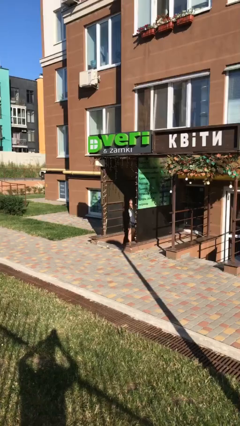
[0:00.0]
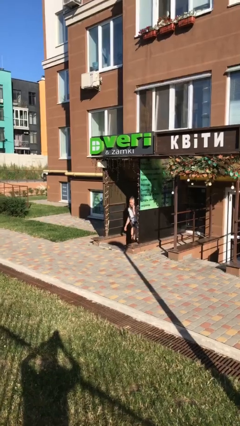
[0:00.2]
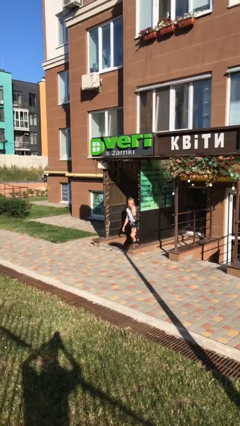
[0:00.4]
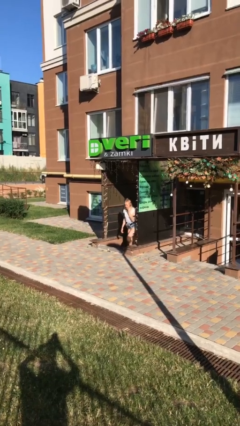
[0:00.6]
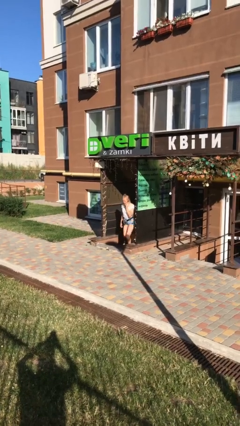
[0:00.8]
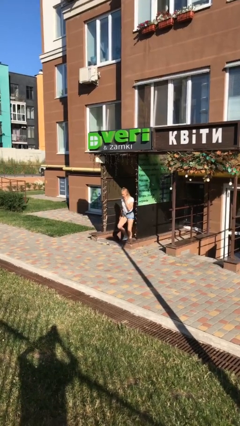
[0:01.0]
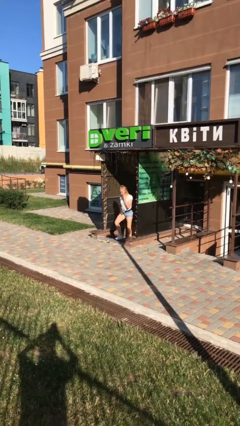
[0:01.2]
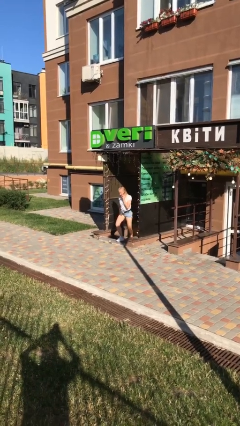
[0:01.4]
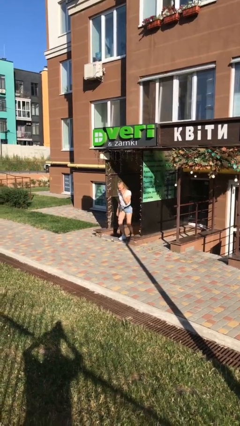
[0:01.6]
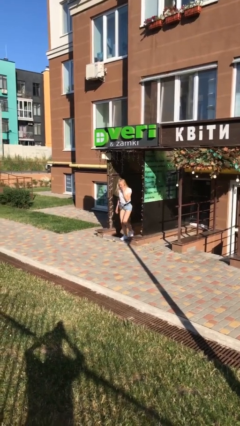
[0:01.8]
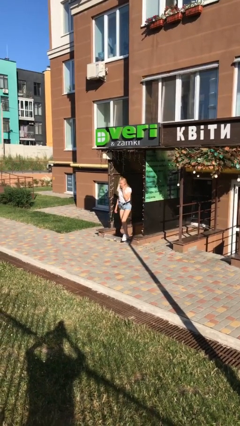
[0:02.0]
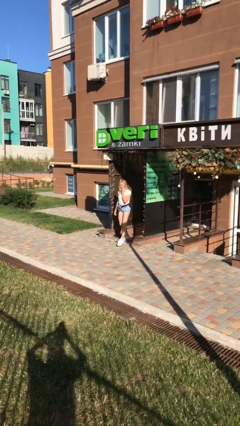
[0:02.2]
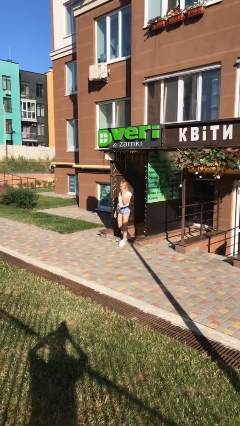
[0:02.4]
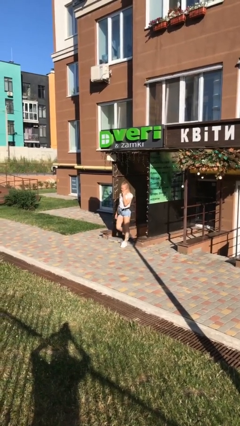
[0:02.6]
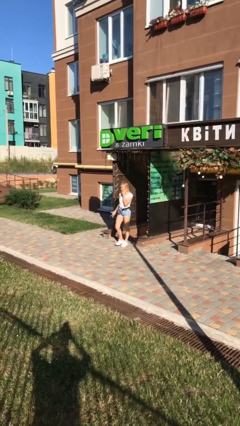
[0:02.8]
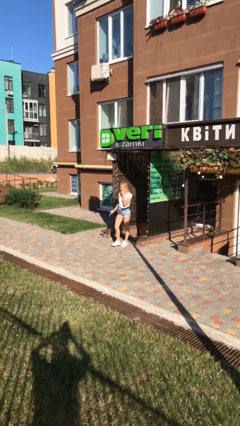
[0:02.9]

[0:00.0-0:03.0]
person enters scene through structure

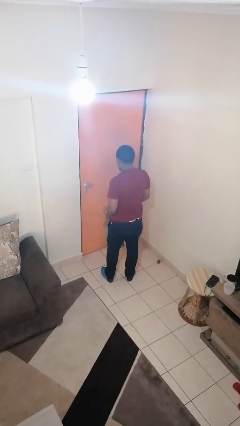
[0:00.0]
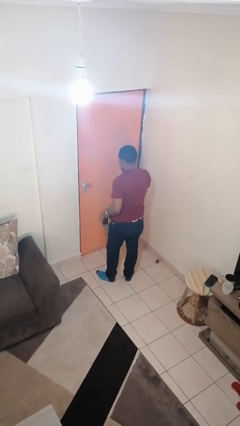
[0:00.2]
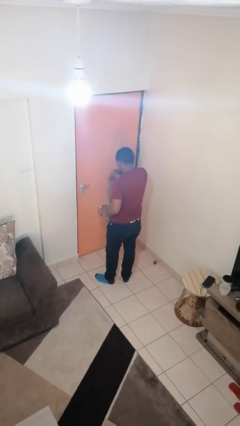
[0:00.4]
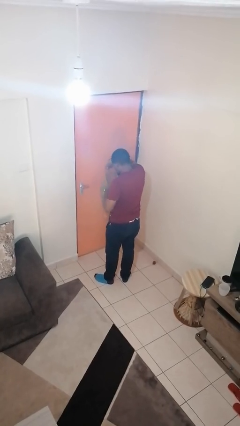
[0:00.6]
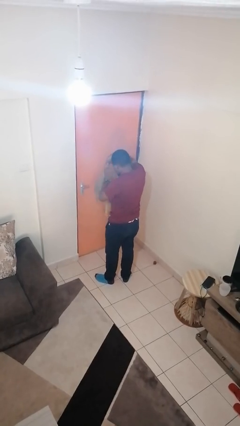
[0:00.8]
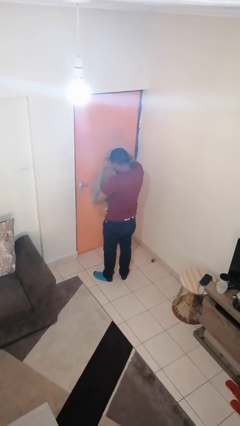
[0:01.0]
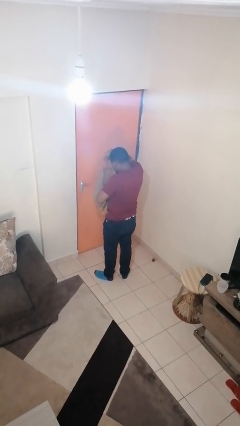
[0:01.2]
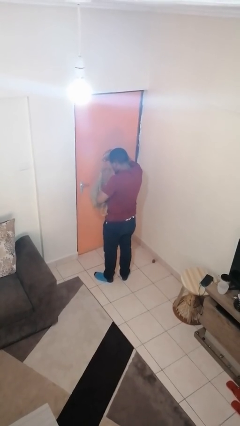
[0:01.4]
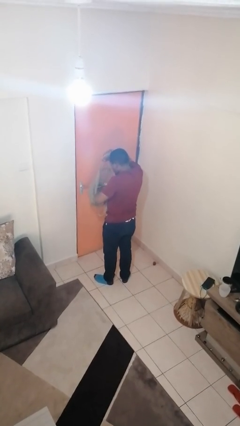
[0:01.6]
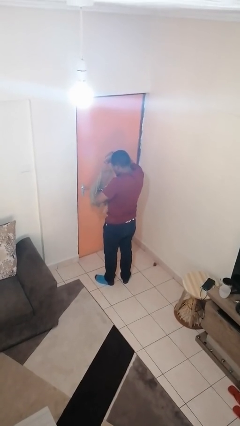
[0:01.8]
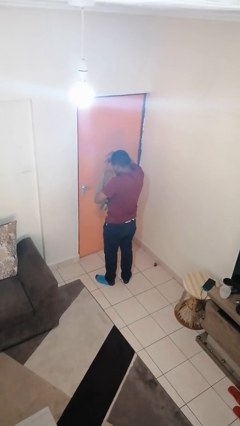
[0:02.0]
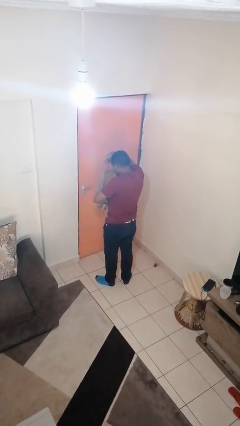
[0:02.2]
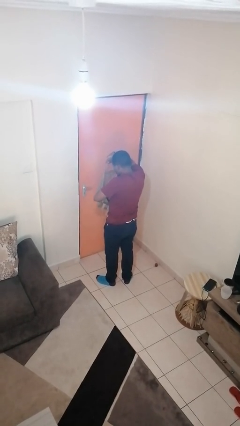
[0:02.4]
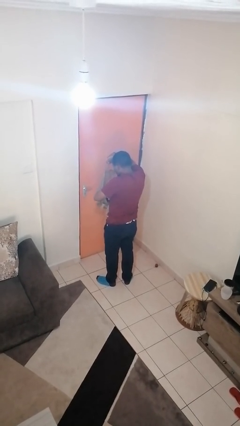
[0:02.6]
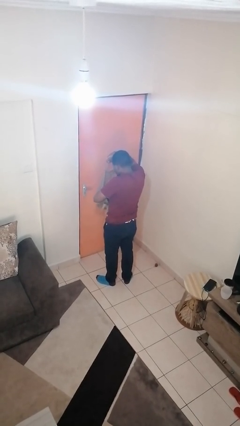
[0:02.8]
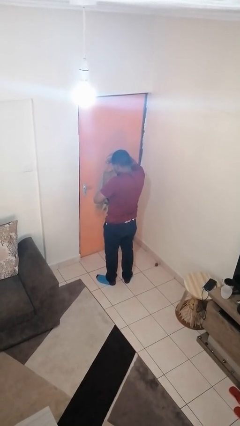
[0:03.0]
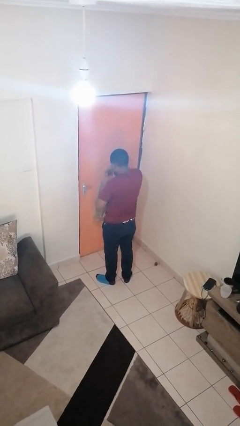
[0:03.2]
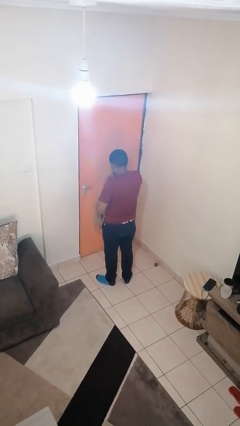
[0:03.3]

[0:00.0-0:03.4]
person searches in bag

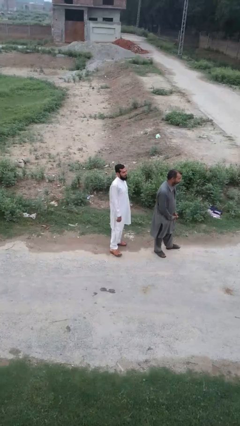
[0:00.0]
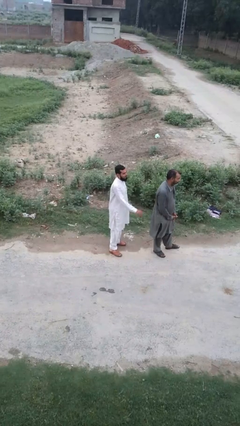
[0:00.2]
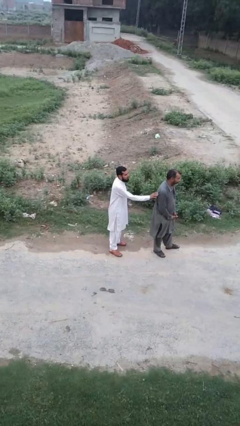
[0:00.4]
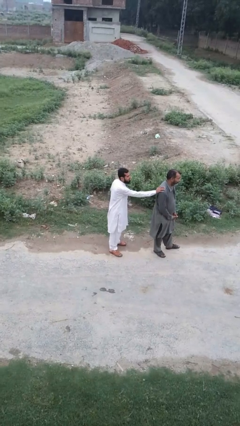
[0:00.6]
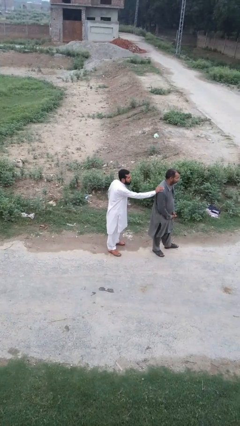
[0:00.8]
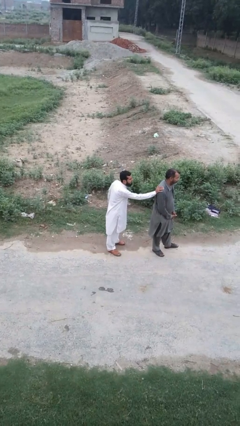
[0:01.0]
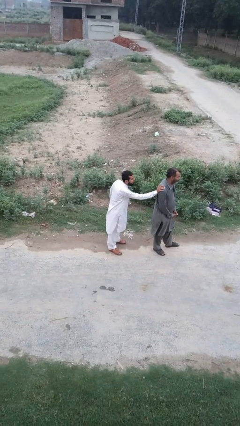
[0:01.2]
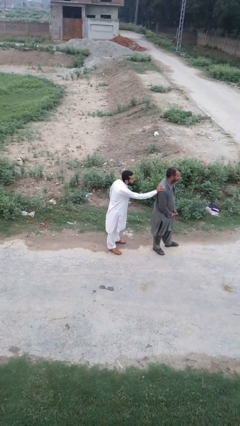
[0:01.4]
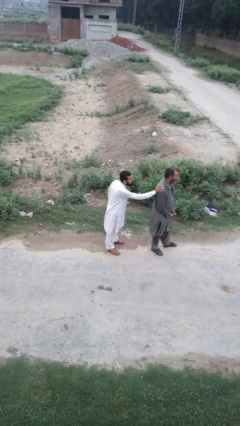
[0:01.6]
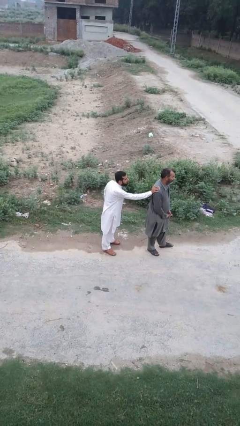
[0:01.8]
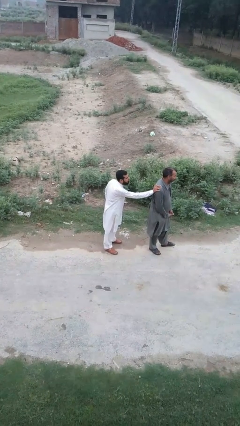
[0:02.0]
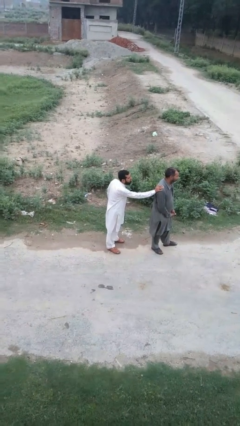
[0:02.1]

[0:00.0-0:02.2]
person touches back of person

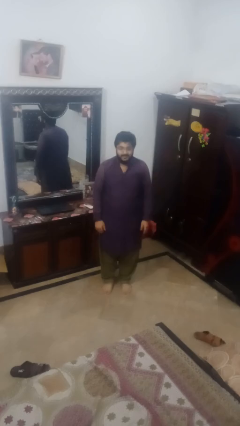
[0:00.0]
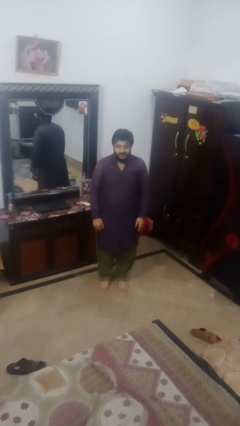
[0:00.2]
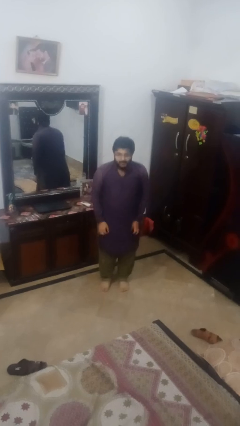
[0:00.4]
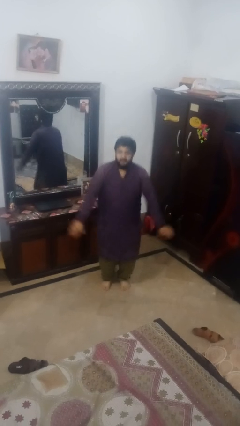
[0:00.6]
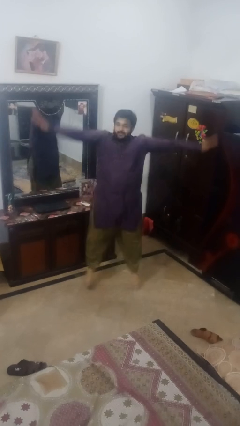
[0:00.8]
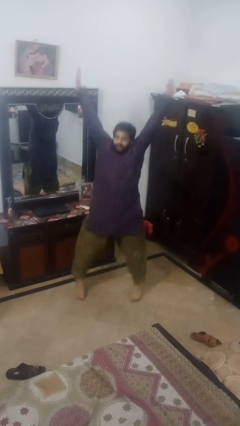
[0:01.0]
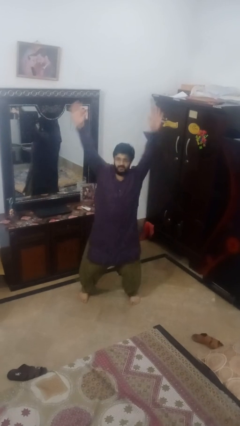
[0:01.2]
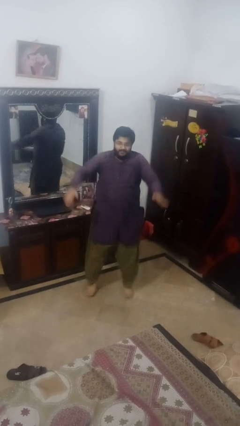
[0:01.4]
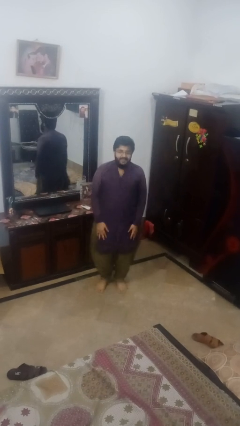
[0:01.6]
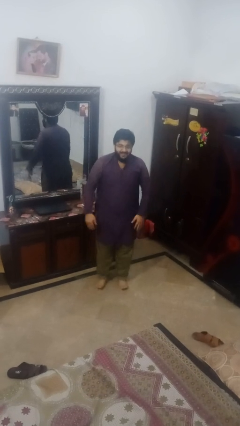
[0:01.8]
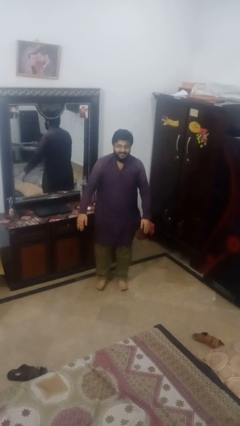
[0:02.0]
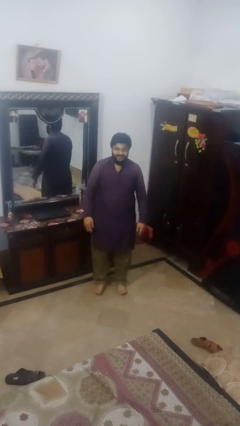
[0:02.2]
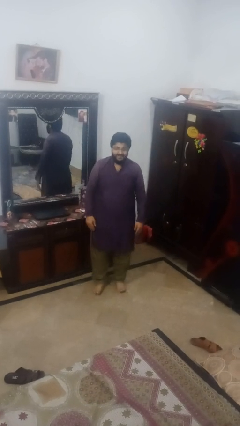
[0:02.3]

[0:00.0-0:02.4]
person exercises with jumping jacks

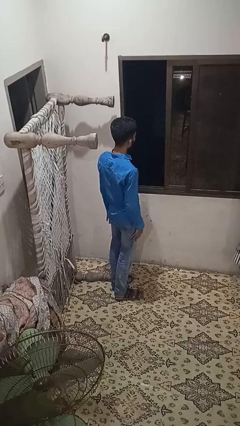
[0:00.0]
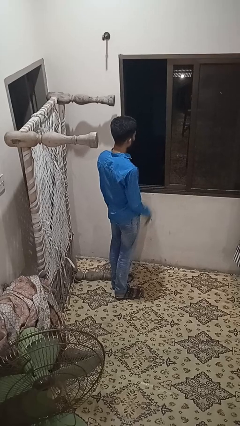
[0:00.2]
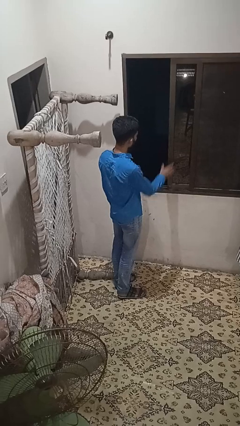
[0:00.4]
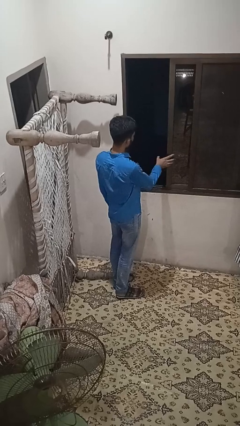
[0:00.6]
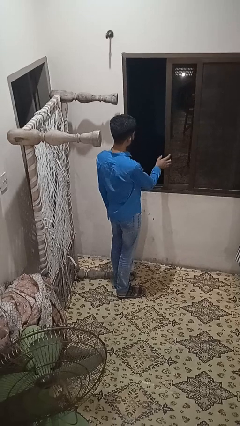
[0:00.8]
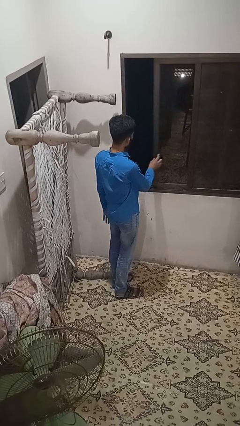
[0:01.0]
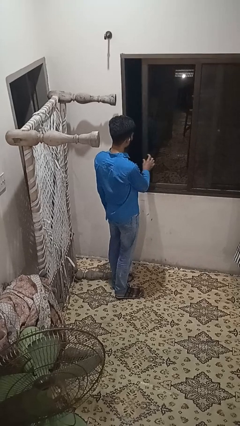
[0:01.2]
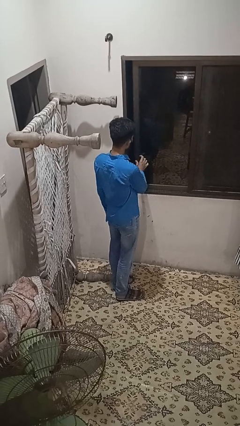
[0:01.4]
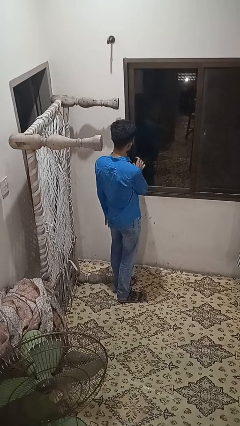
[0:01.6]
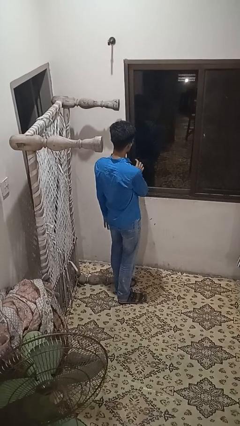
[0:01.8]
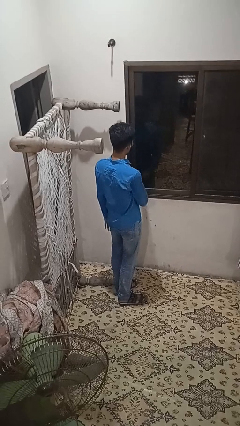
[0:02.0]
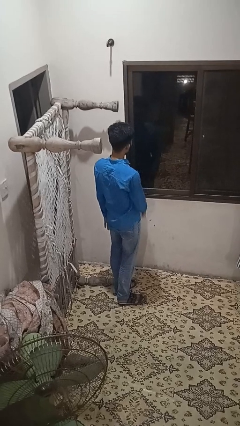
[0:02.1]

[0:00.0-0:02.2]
person closes home window

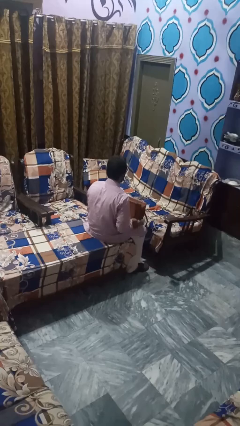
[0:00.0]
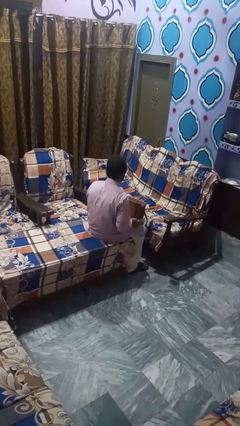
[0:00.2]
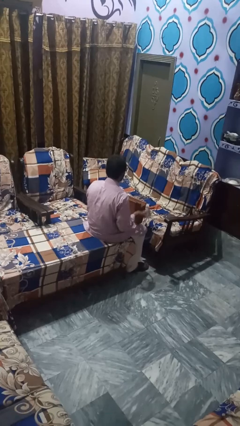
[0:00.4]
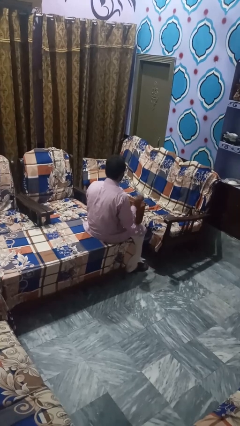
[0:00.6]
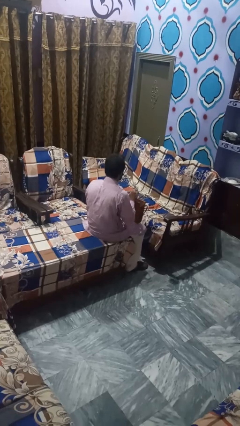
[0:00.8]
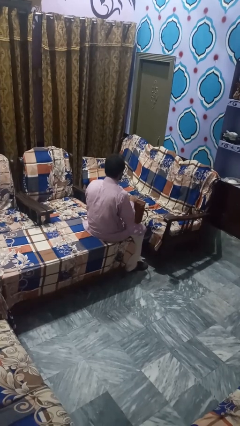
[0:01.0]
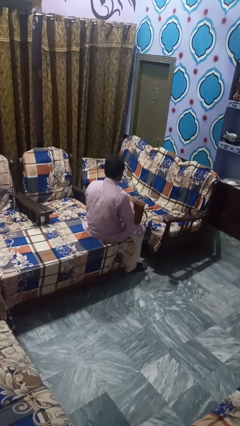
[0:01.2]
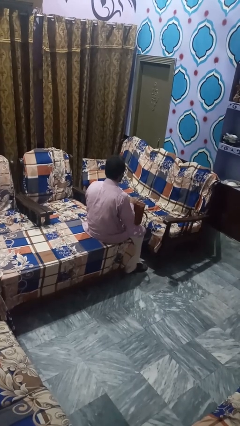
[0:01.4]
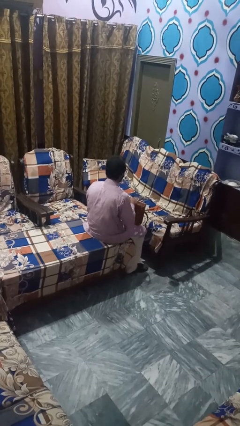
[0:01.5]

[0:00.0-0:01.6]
person takes object from bag

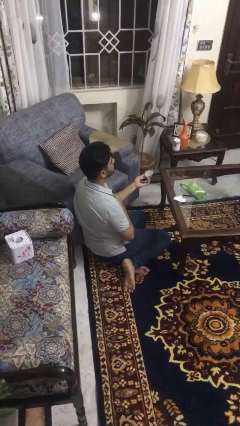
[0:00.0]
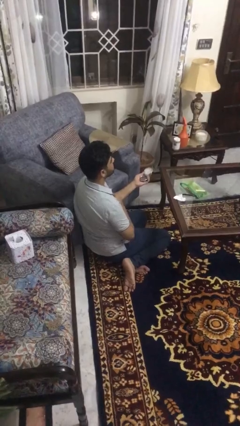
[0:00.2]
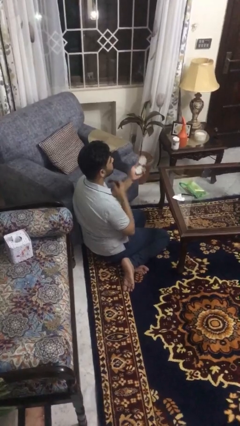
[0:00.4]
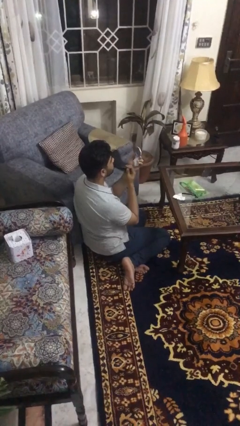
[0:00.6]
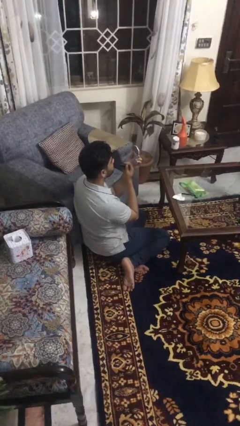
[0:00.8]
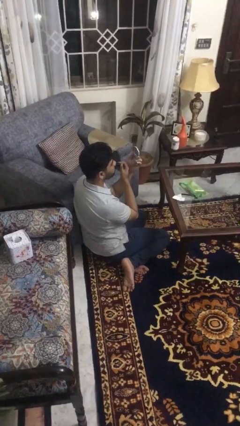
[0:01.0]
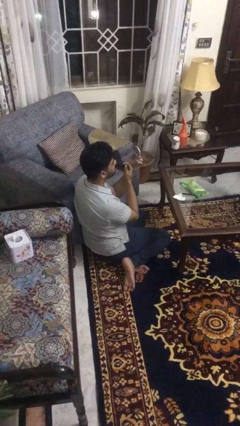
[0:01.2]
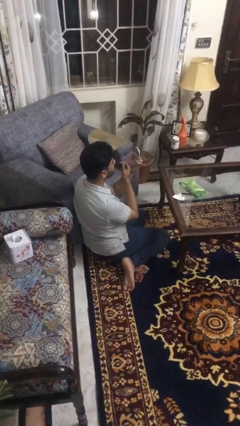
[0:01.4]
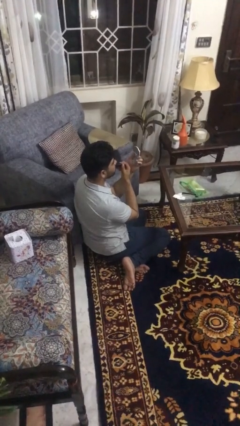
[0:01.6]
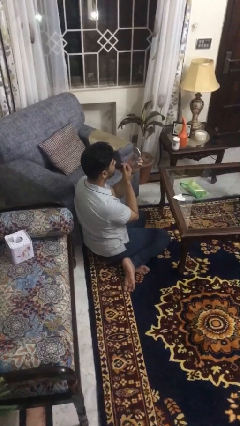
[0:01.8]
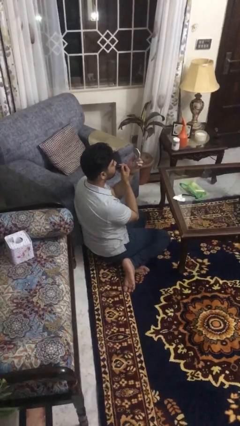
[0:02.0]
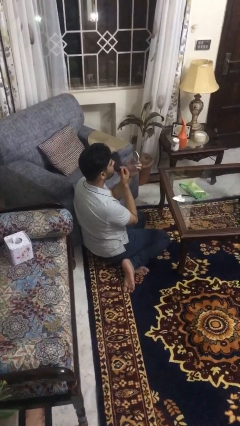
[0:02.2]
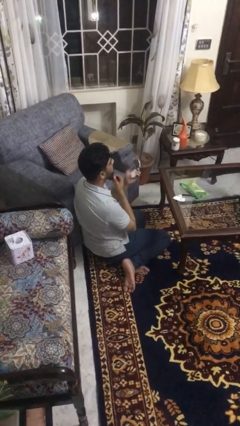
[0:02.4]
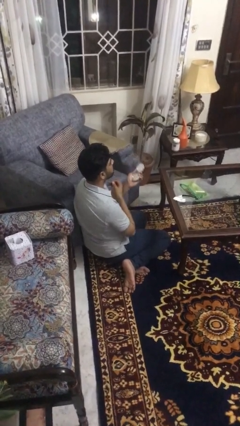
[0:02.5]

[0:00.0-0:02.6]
person applies lip makeup
